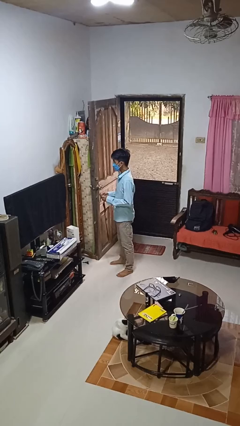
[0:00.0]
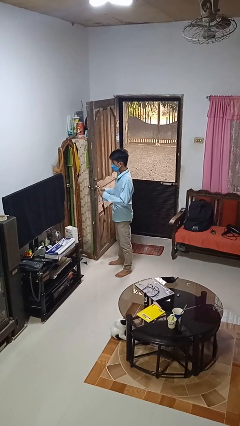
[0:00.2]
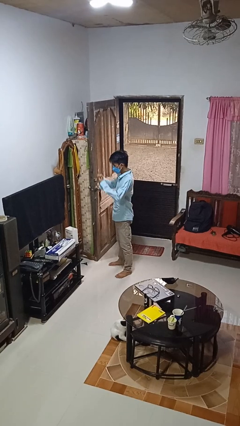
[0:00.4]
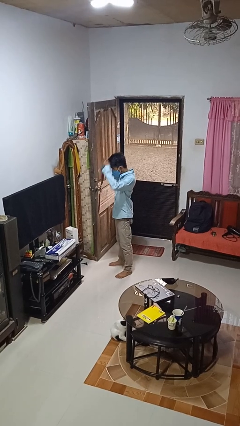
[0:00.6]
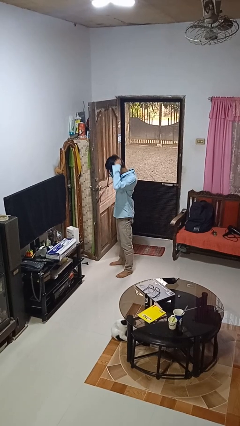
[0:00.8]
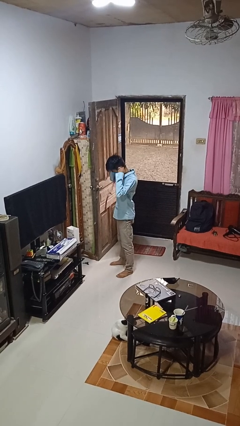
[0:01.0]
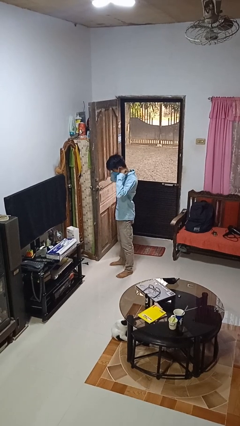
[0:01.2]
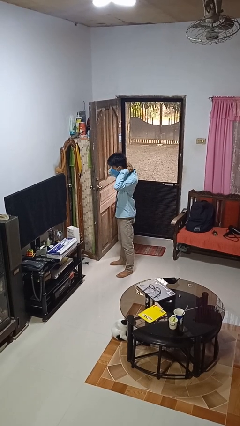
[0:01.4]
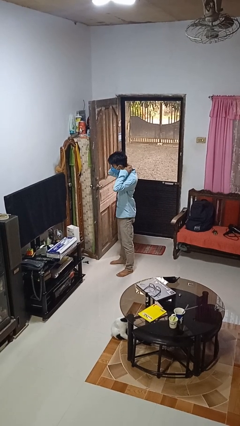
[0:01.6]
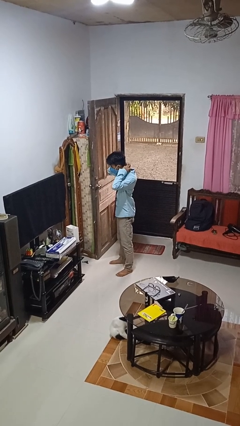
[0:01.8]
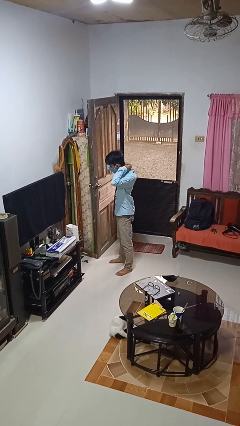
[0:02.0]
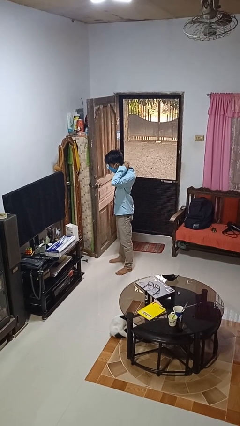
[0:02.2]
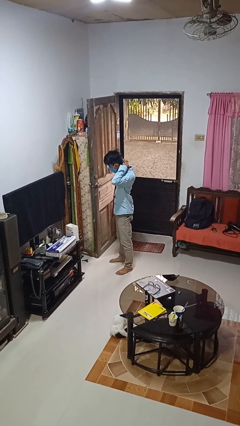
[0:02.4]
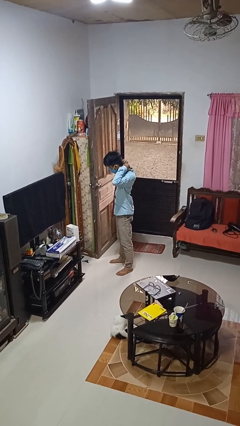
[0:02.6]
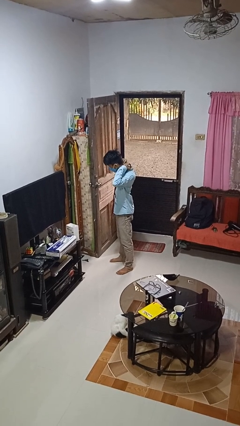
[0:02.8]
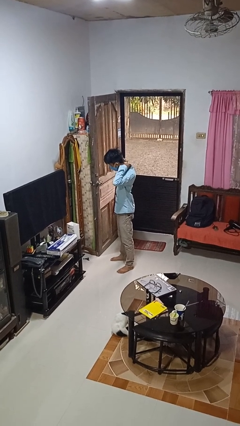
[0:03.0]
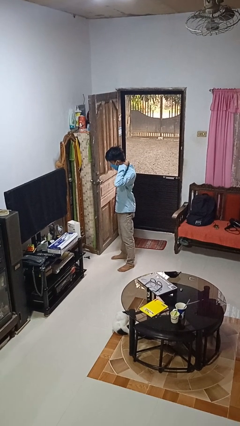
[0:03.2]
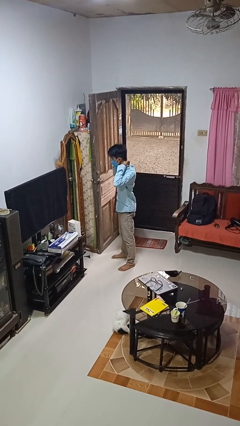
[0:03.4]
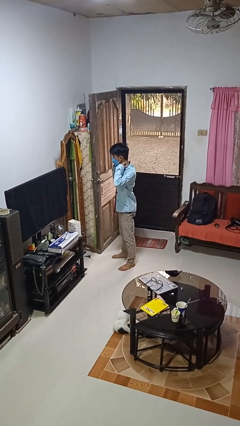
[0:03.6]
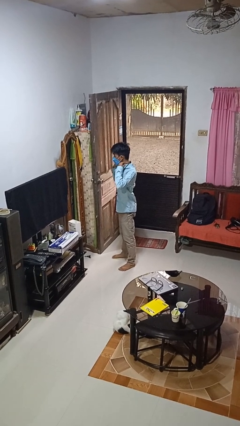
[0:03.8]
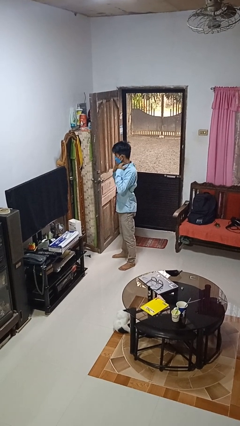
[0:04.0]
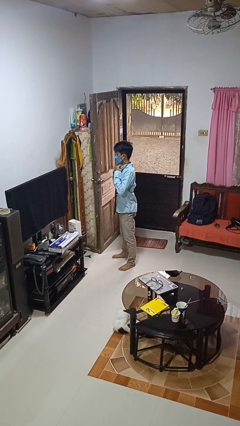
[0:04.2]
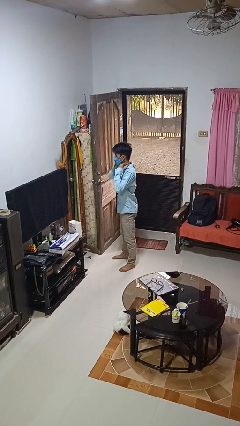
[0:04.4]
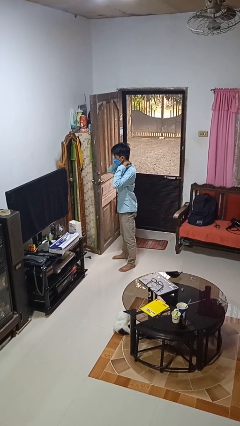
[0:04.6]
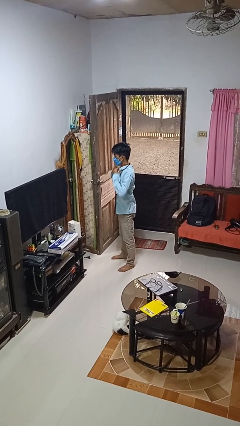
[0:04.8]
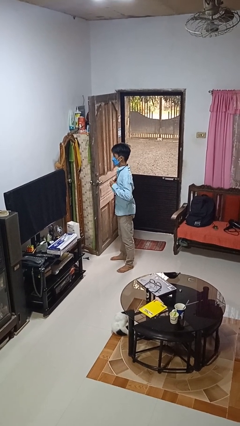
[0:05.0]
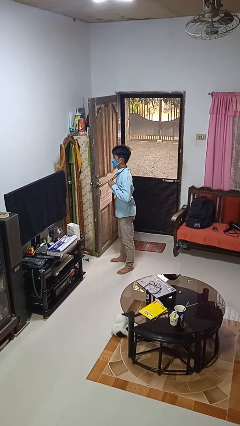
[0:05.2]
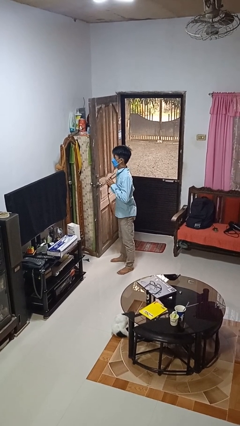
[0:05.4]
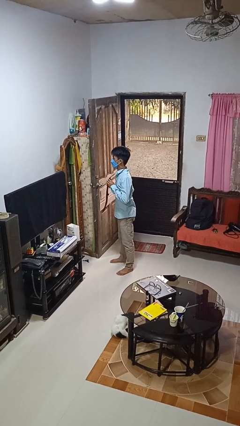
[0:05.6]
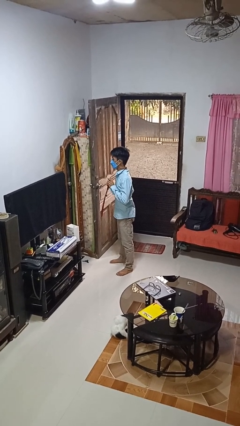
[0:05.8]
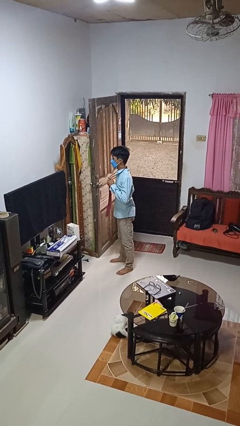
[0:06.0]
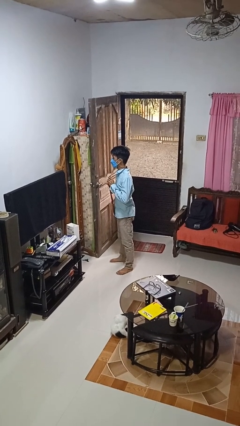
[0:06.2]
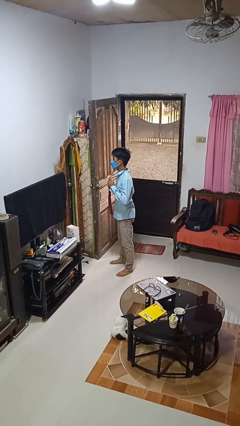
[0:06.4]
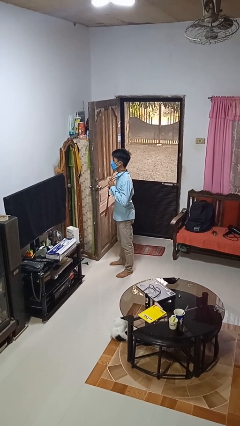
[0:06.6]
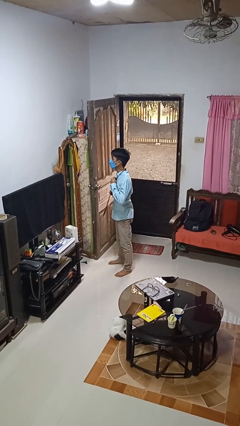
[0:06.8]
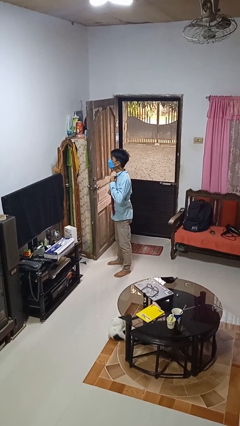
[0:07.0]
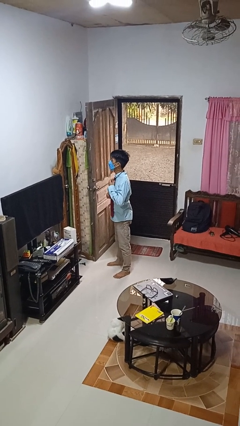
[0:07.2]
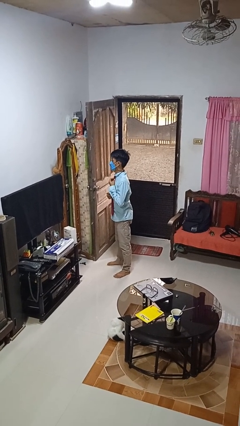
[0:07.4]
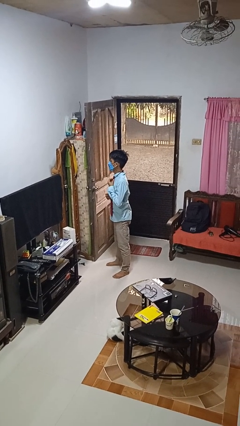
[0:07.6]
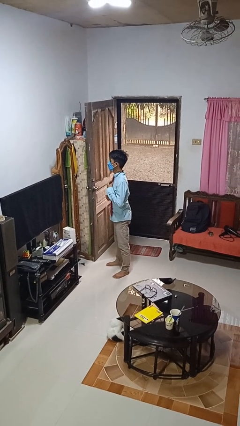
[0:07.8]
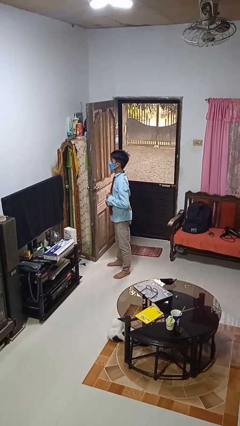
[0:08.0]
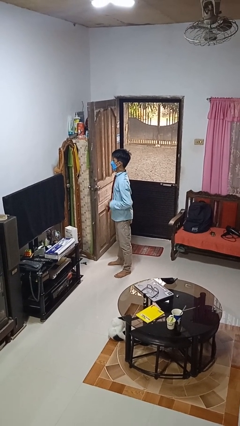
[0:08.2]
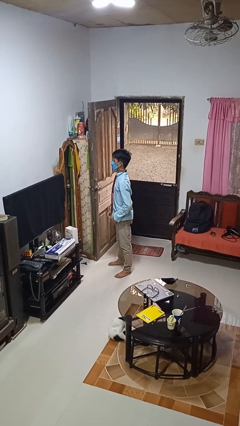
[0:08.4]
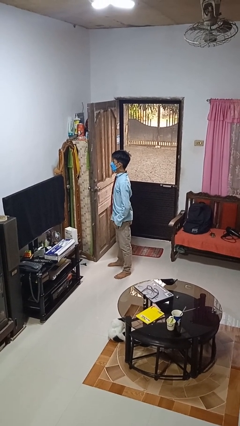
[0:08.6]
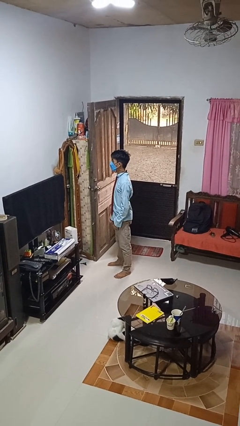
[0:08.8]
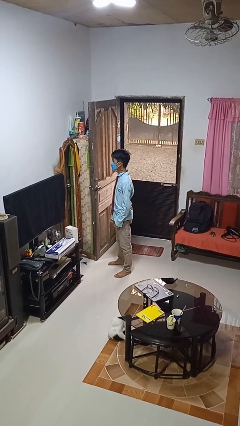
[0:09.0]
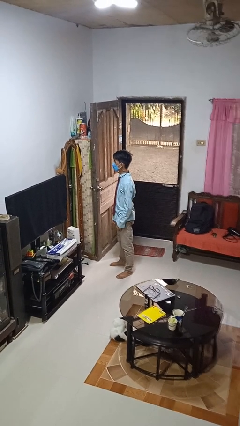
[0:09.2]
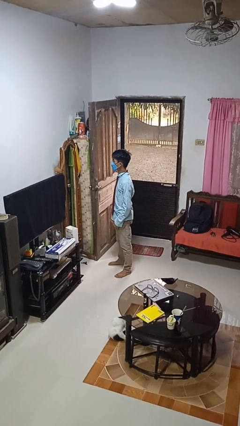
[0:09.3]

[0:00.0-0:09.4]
person puts on necktie

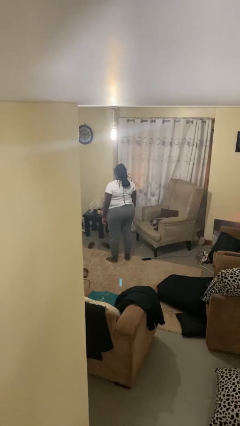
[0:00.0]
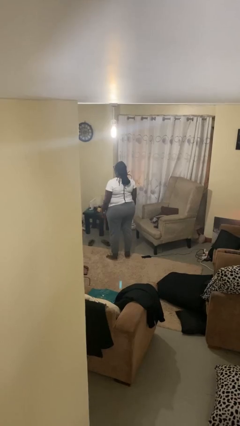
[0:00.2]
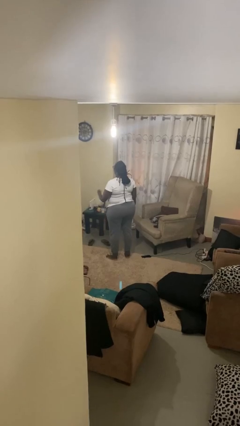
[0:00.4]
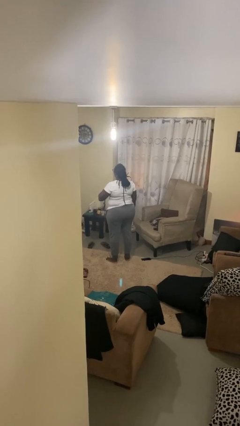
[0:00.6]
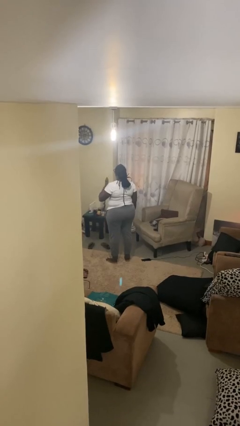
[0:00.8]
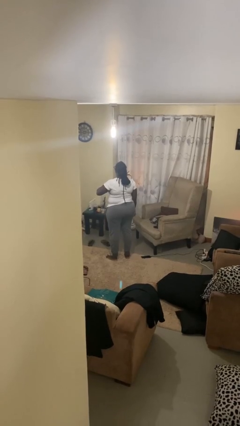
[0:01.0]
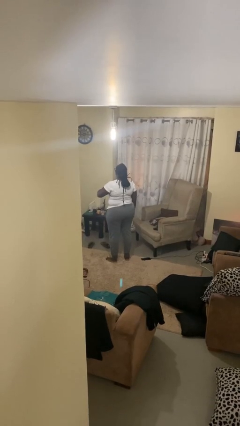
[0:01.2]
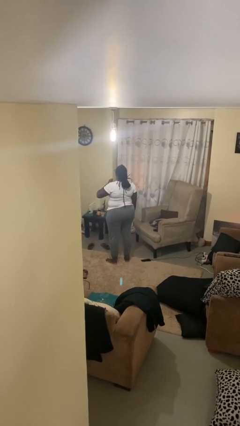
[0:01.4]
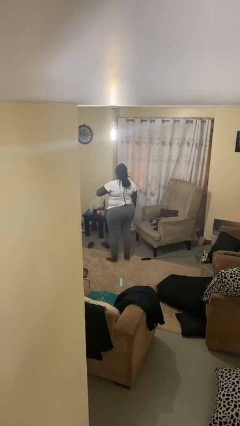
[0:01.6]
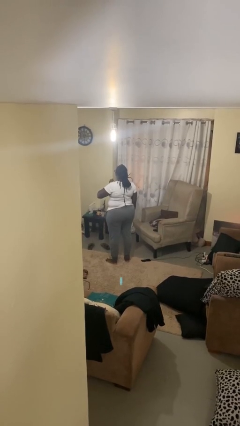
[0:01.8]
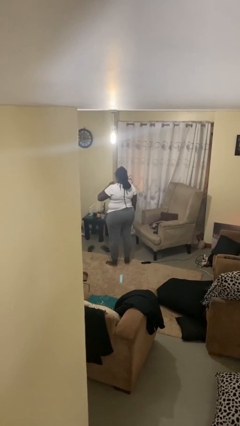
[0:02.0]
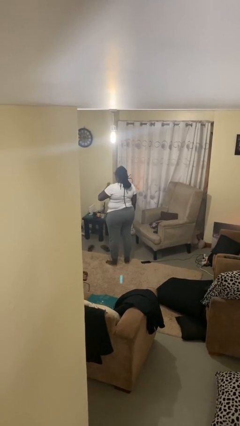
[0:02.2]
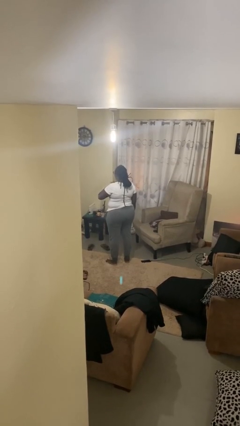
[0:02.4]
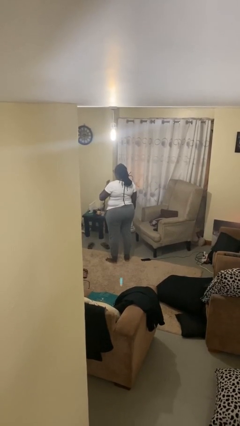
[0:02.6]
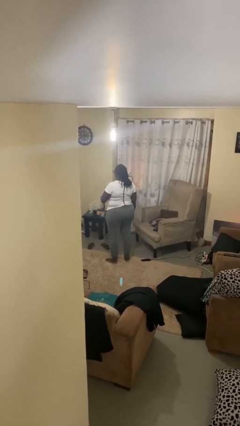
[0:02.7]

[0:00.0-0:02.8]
person drums on chest

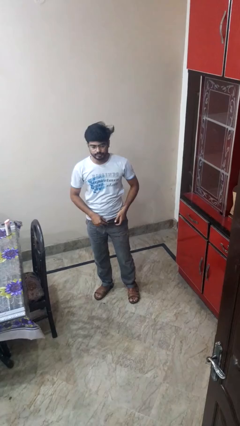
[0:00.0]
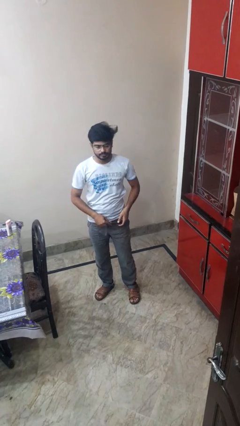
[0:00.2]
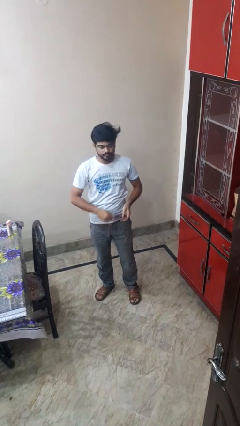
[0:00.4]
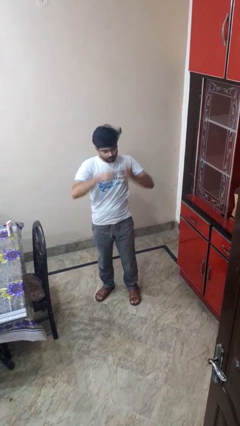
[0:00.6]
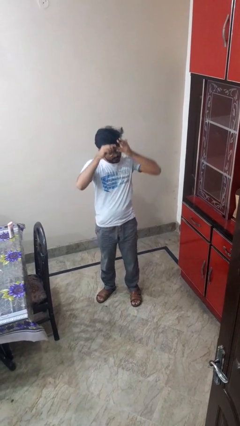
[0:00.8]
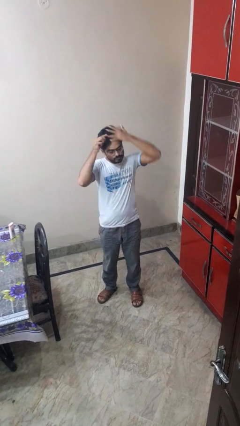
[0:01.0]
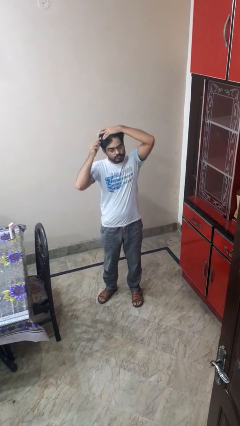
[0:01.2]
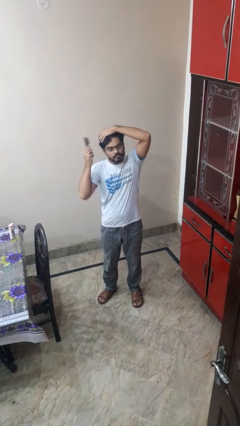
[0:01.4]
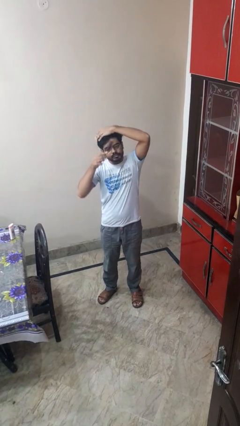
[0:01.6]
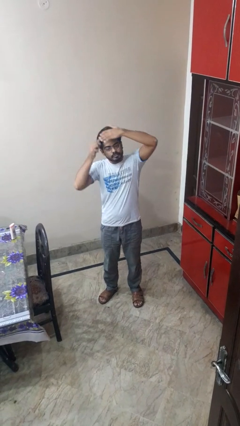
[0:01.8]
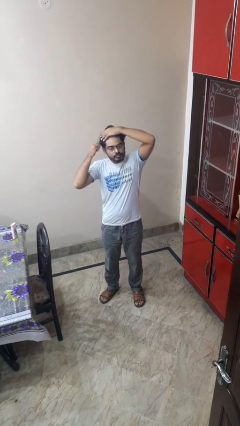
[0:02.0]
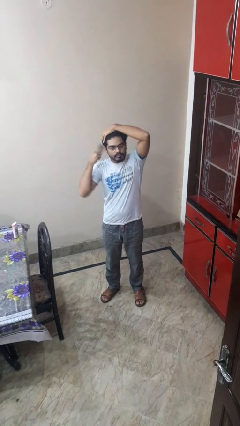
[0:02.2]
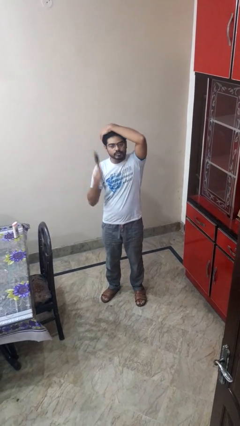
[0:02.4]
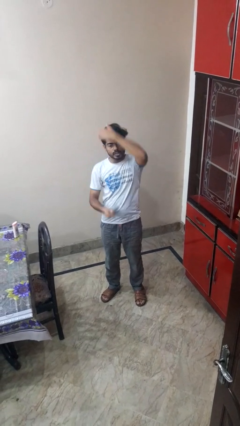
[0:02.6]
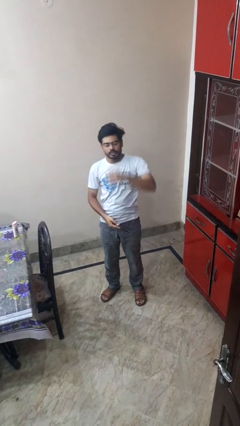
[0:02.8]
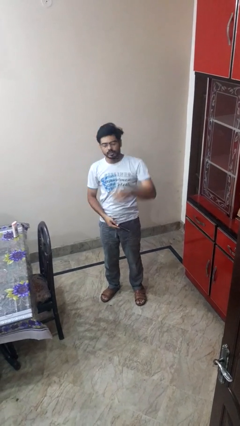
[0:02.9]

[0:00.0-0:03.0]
person brushes hair

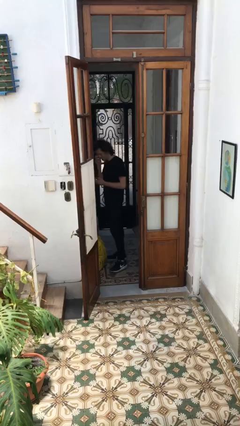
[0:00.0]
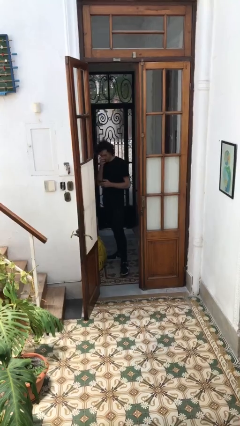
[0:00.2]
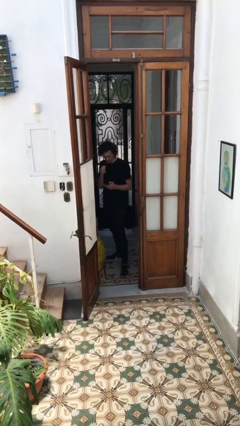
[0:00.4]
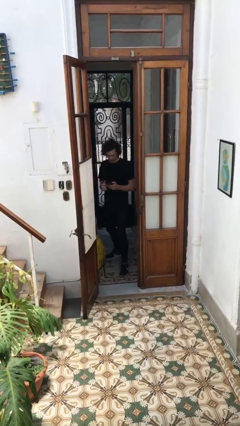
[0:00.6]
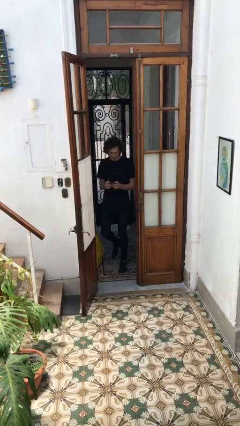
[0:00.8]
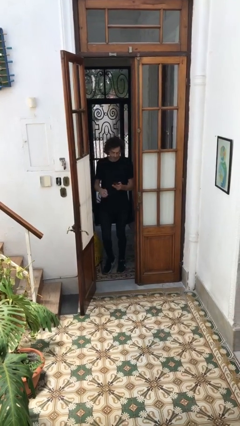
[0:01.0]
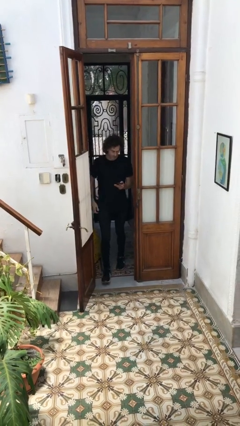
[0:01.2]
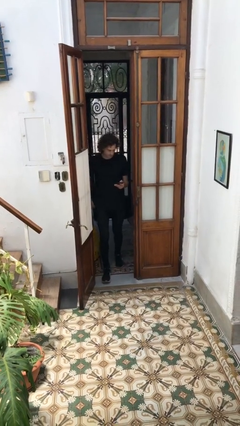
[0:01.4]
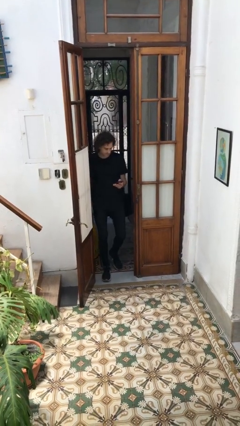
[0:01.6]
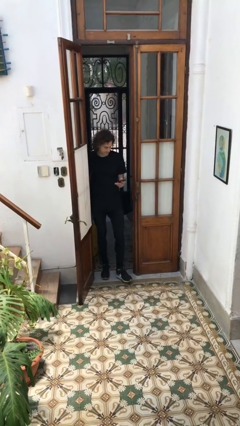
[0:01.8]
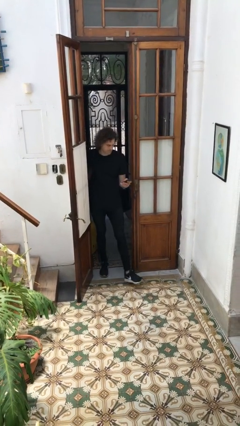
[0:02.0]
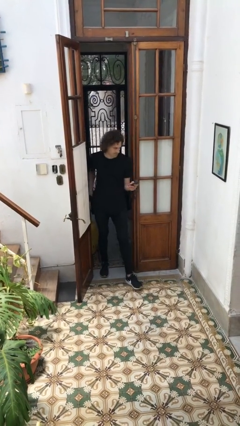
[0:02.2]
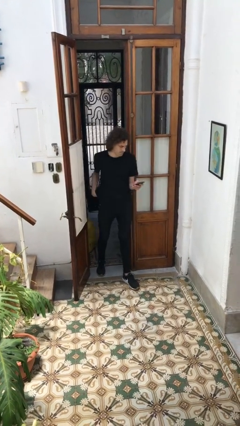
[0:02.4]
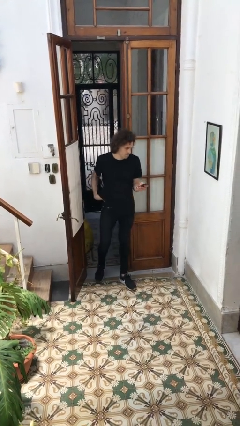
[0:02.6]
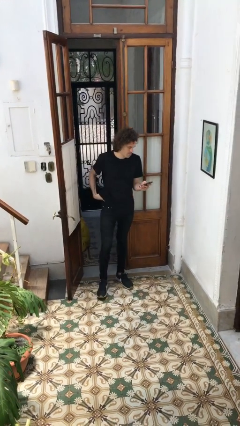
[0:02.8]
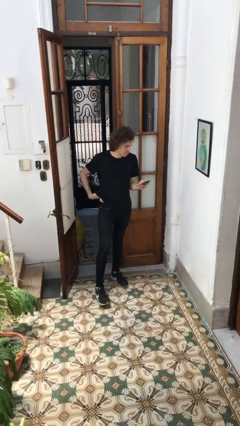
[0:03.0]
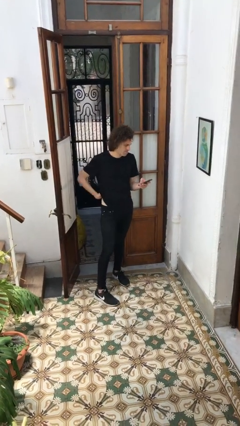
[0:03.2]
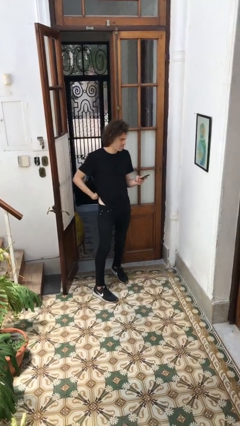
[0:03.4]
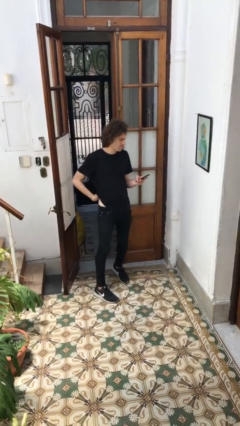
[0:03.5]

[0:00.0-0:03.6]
person enters scene through structure
